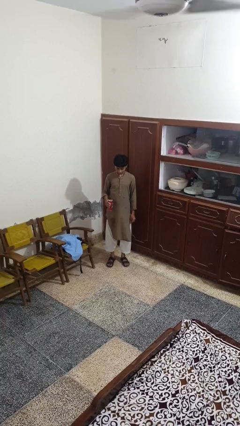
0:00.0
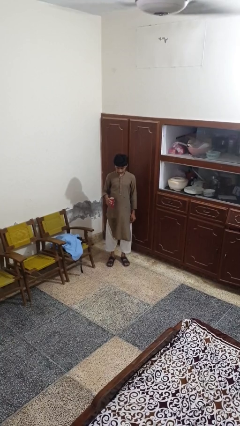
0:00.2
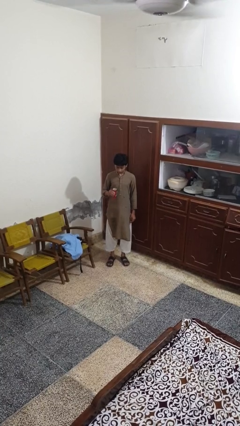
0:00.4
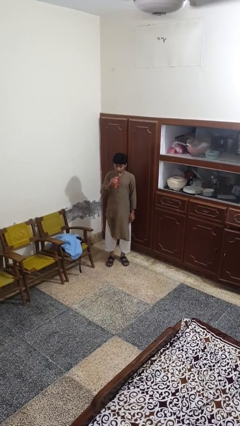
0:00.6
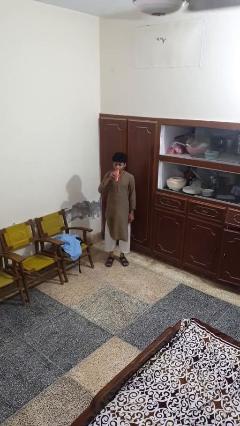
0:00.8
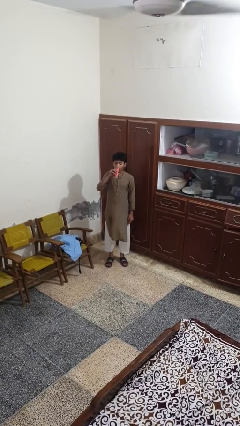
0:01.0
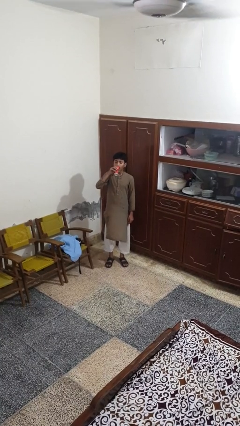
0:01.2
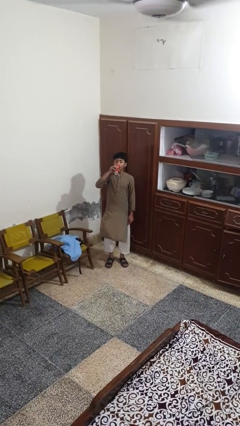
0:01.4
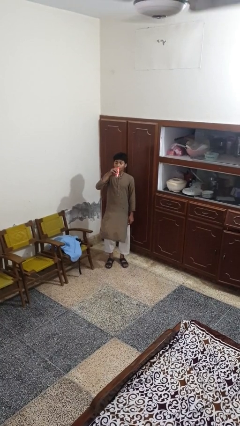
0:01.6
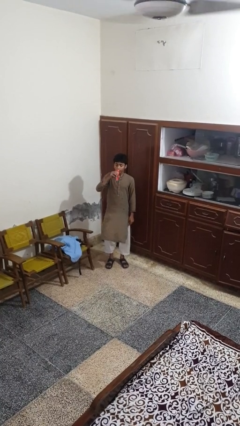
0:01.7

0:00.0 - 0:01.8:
person drinks from beverage can

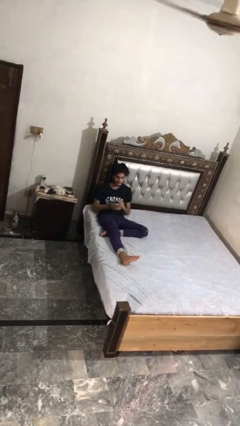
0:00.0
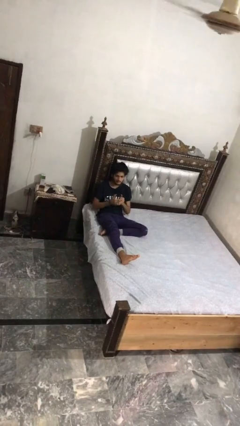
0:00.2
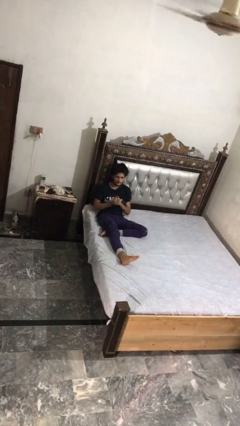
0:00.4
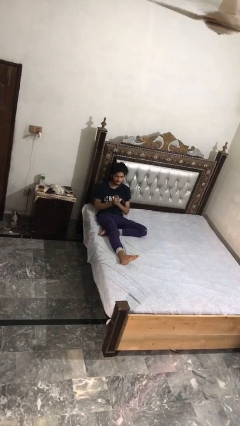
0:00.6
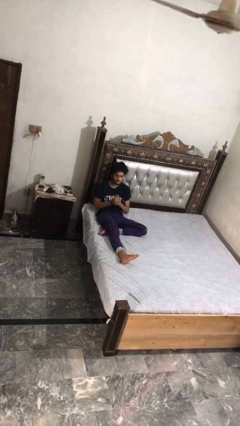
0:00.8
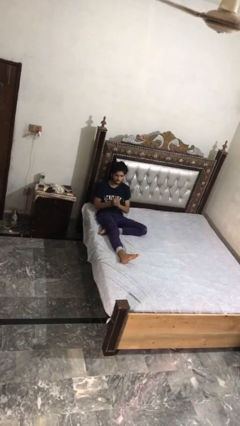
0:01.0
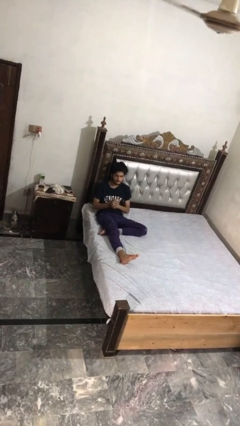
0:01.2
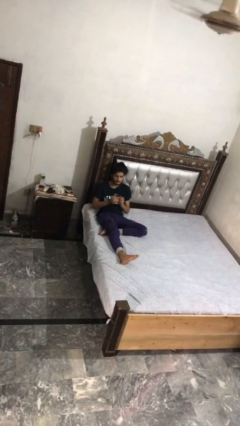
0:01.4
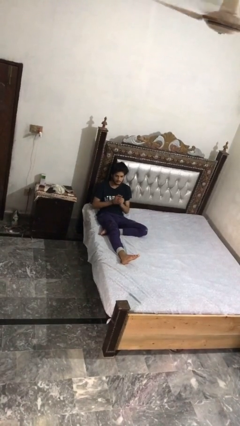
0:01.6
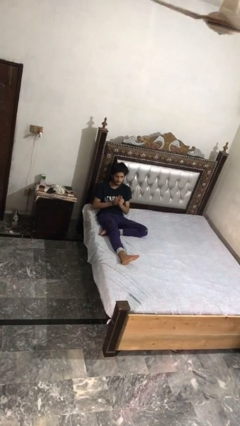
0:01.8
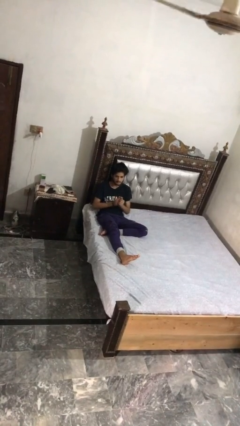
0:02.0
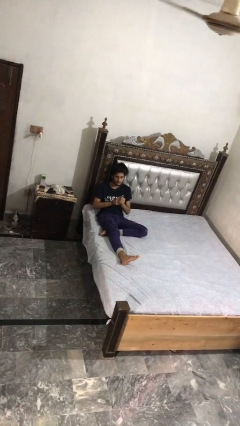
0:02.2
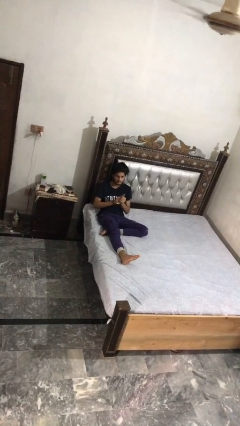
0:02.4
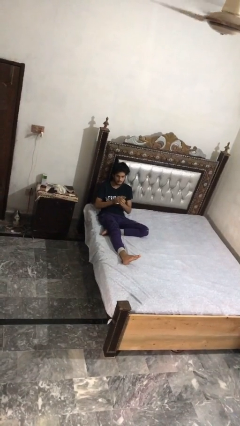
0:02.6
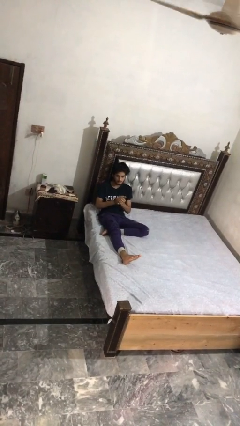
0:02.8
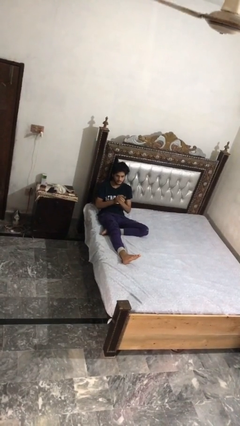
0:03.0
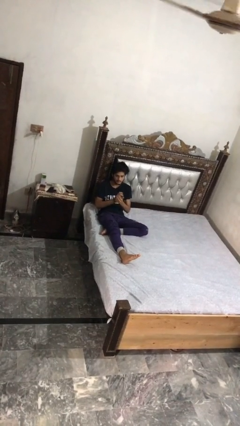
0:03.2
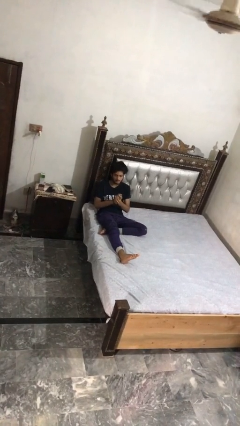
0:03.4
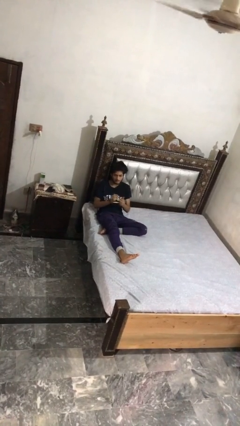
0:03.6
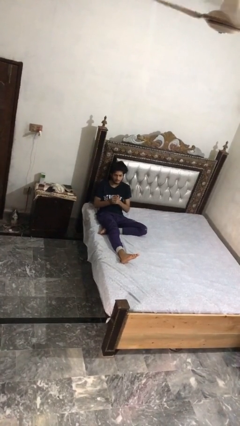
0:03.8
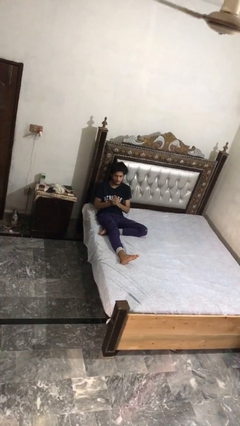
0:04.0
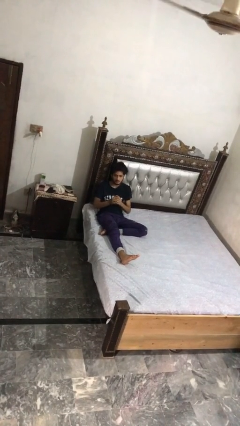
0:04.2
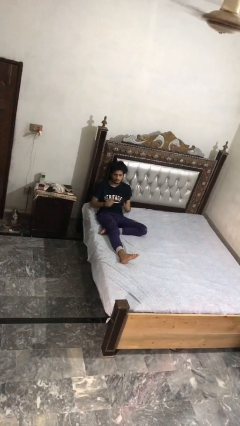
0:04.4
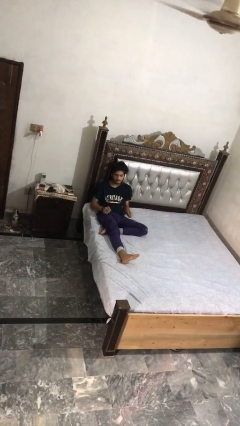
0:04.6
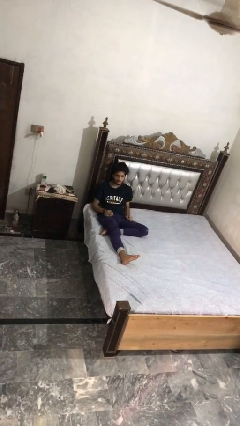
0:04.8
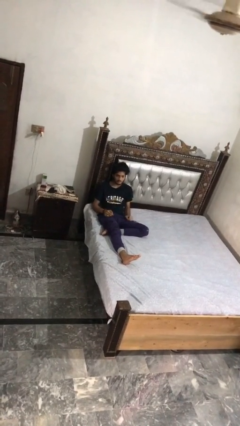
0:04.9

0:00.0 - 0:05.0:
person cracks knuckles

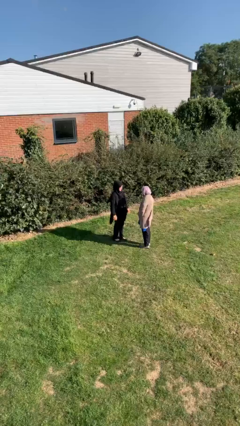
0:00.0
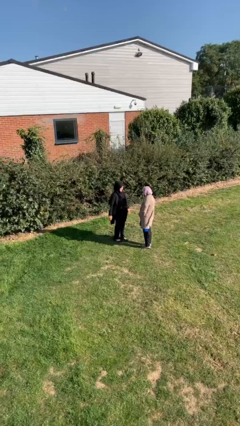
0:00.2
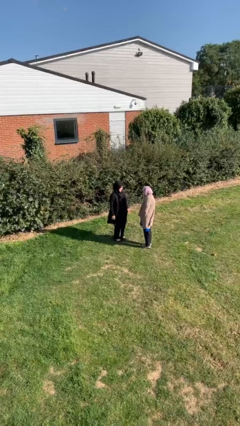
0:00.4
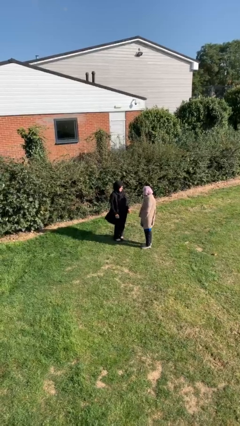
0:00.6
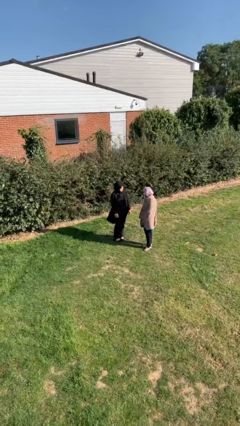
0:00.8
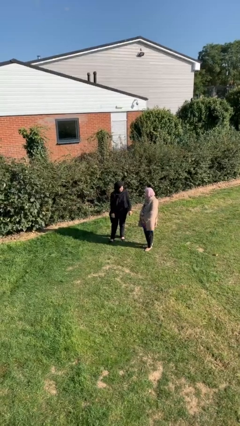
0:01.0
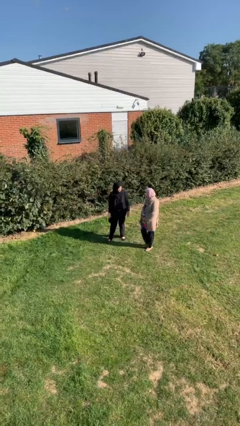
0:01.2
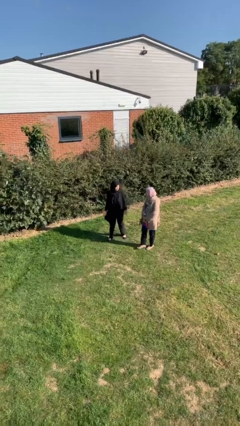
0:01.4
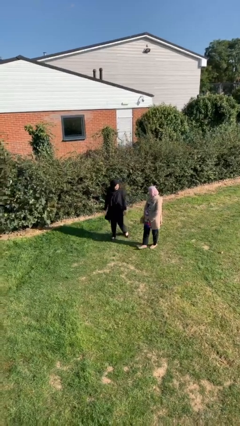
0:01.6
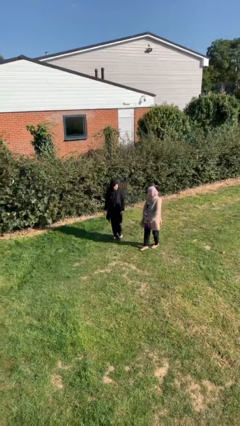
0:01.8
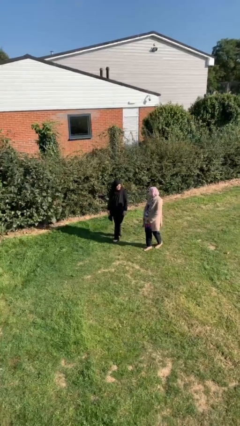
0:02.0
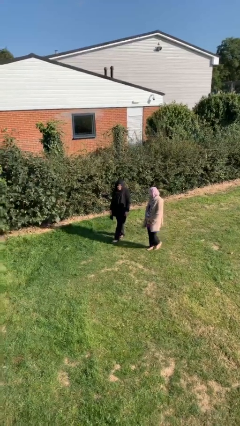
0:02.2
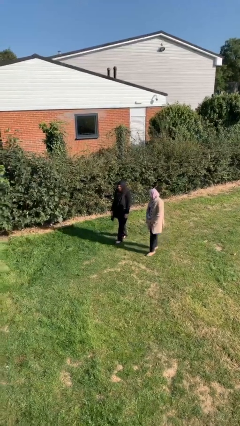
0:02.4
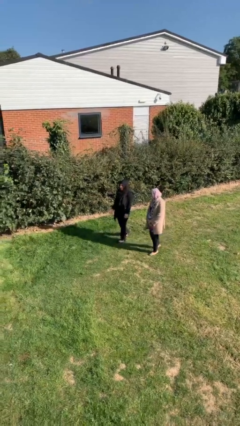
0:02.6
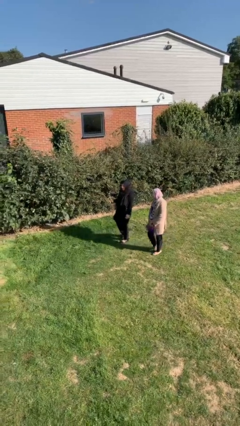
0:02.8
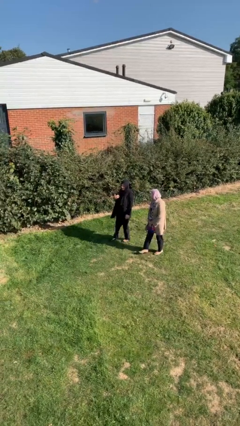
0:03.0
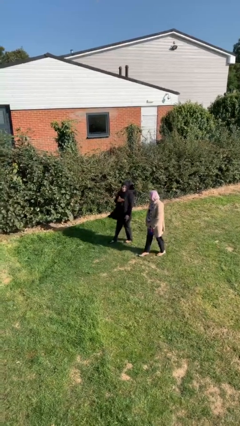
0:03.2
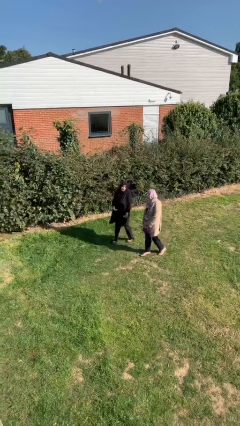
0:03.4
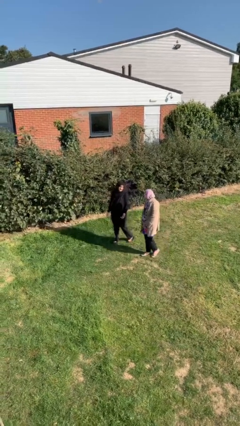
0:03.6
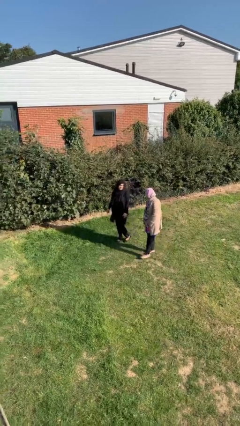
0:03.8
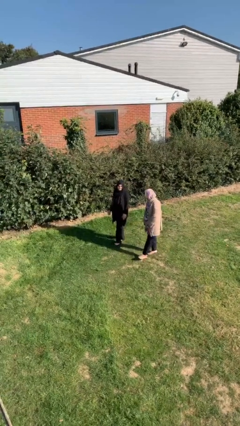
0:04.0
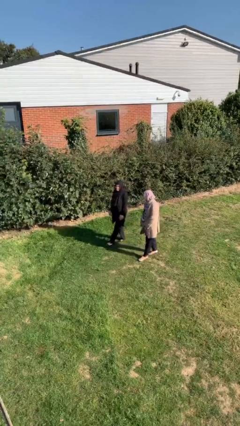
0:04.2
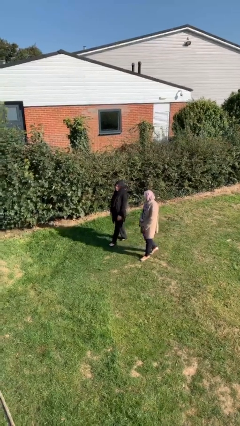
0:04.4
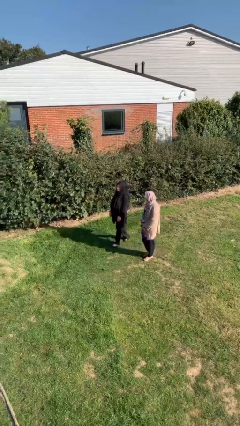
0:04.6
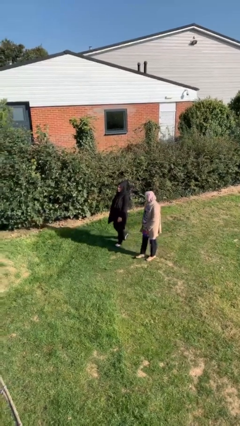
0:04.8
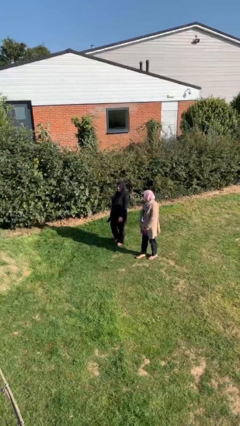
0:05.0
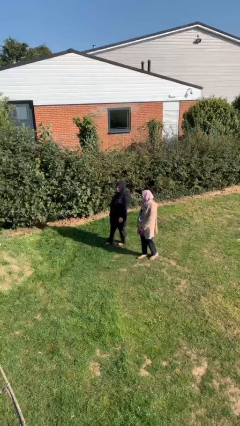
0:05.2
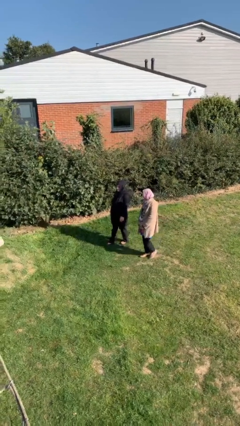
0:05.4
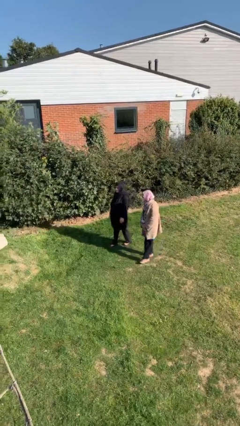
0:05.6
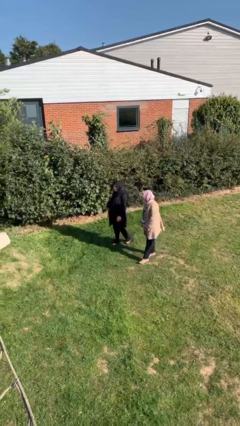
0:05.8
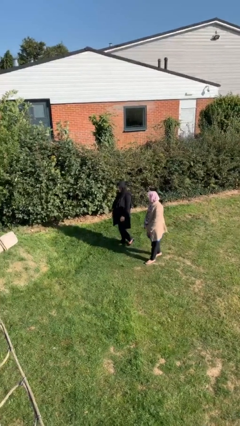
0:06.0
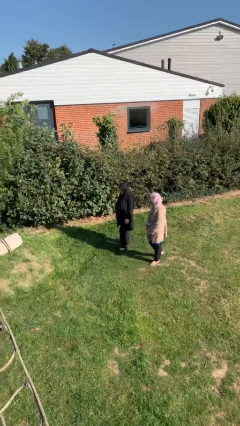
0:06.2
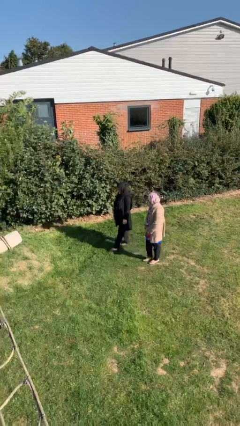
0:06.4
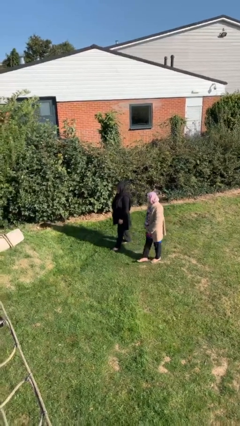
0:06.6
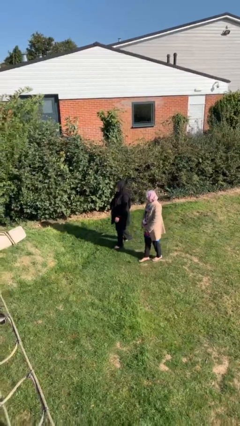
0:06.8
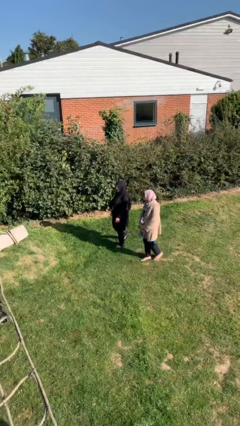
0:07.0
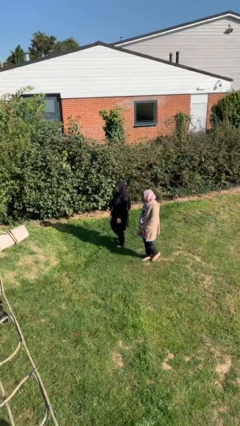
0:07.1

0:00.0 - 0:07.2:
person talks to person

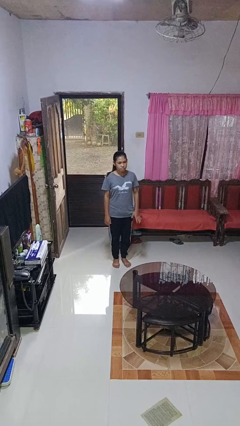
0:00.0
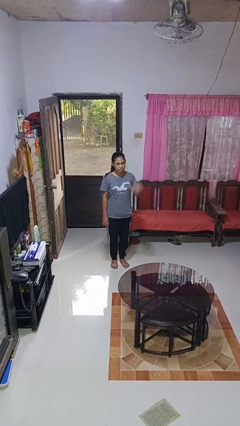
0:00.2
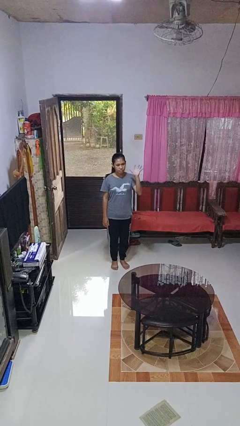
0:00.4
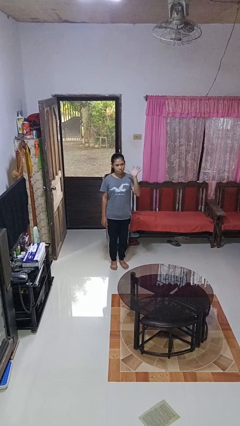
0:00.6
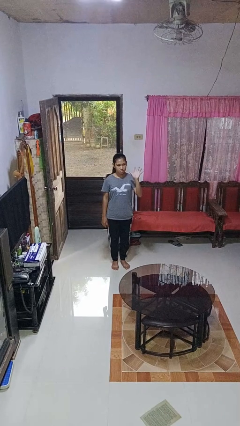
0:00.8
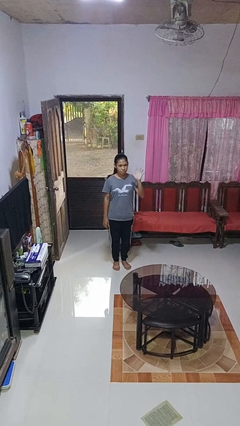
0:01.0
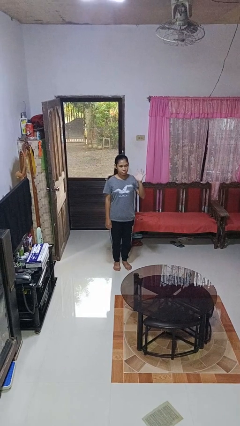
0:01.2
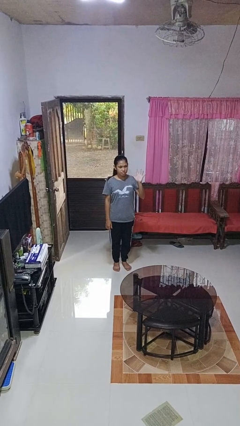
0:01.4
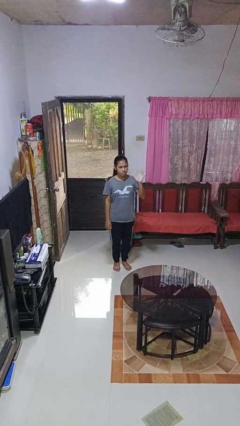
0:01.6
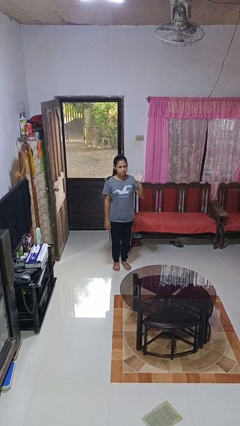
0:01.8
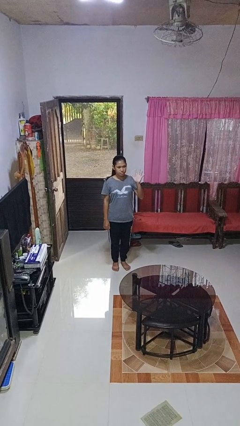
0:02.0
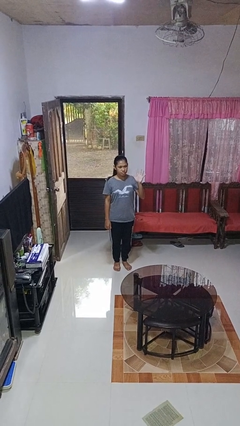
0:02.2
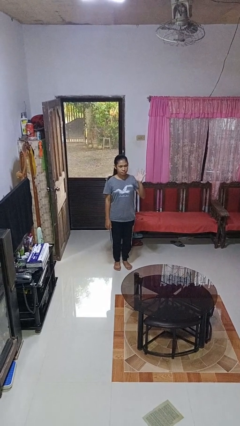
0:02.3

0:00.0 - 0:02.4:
person gestures number five

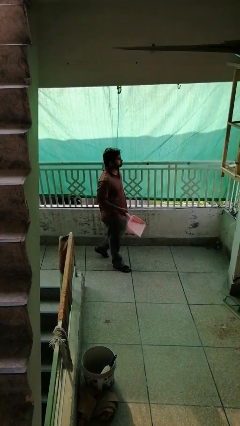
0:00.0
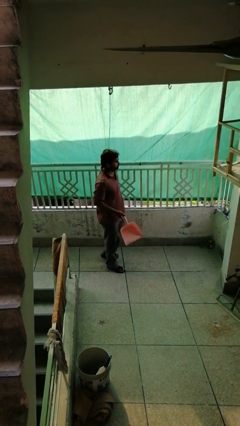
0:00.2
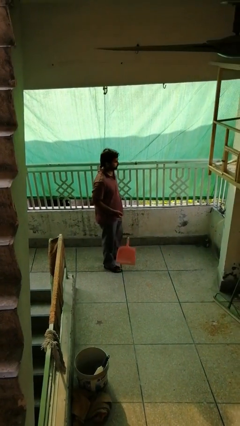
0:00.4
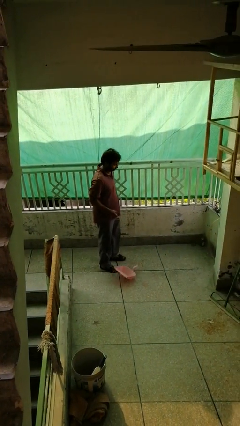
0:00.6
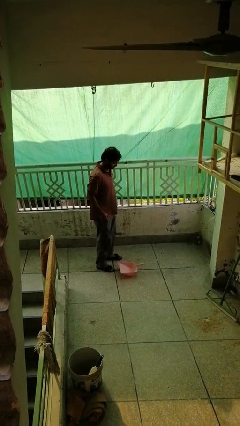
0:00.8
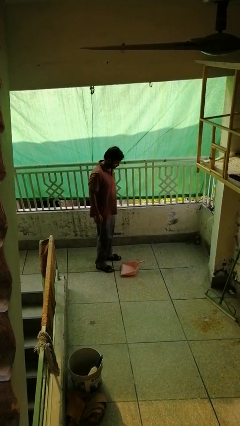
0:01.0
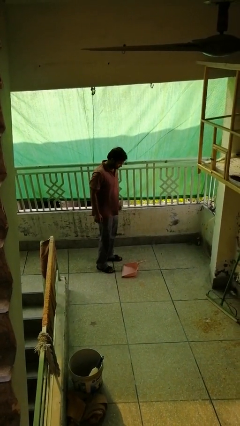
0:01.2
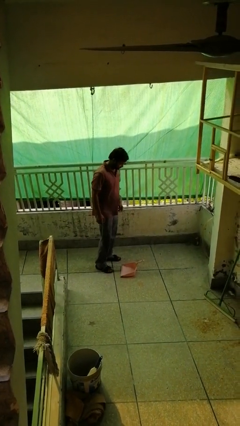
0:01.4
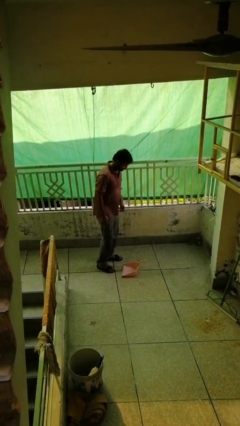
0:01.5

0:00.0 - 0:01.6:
person drops object
